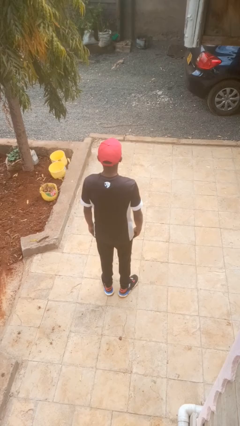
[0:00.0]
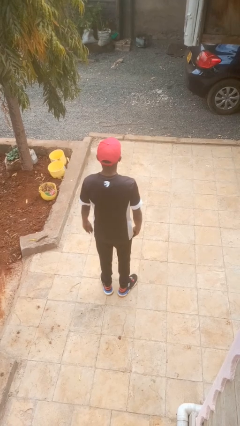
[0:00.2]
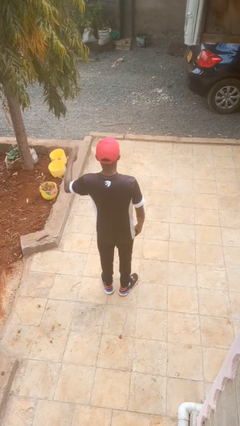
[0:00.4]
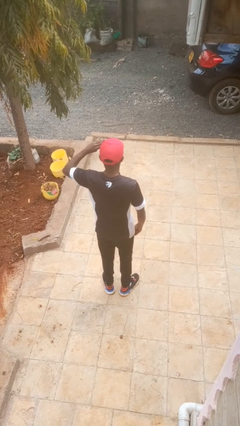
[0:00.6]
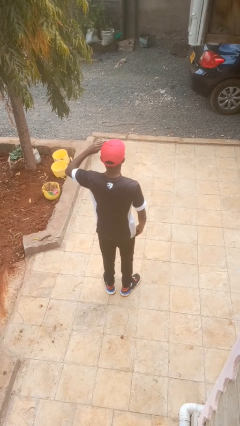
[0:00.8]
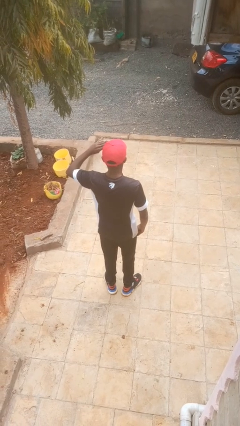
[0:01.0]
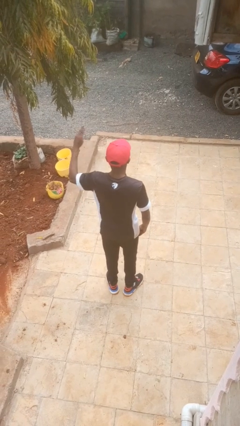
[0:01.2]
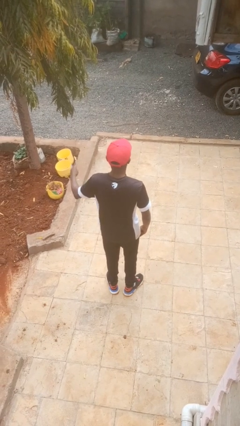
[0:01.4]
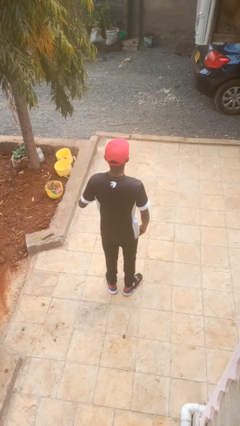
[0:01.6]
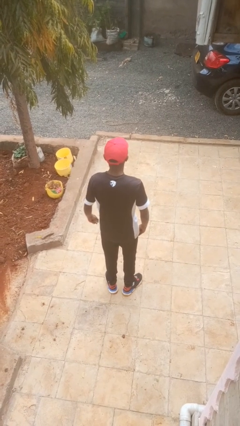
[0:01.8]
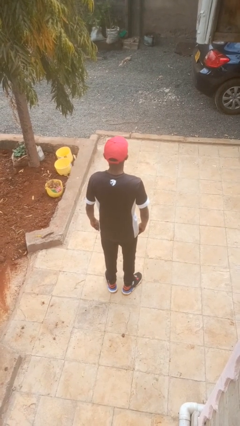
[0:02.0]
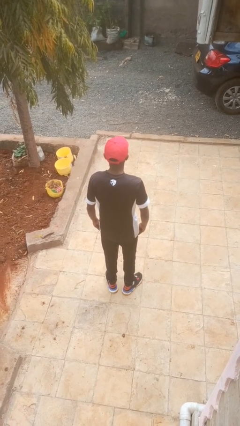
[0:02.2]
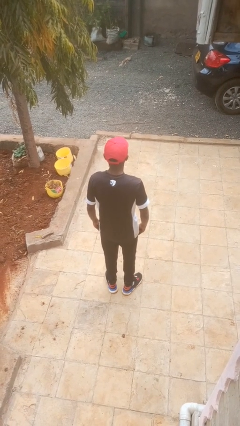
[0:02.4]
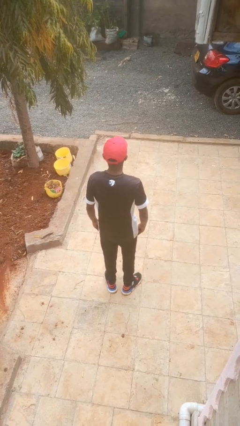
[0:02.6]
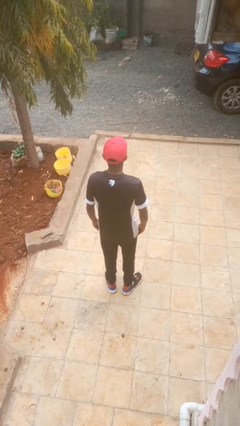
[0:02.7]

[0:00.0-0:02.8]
person salutes

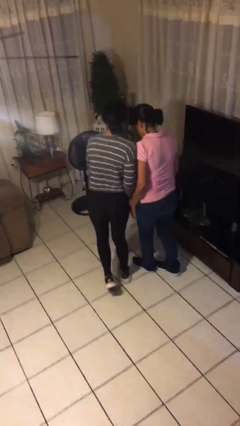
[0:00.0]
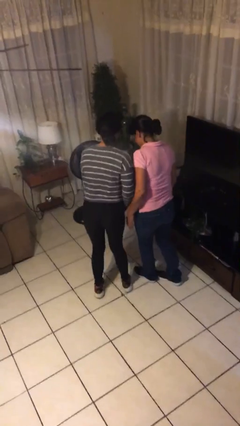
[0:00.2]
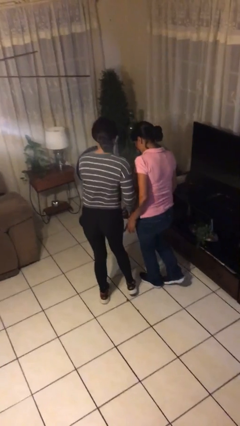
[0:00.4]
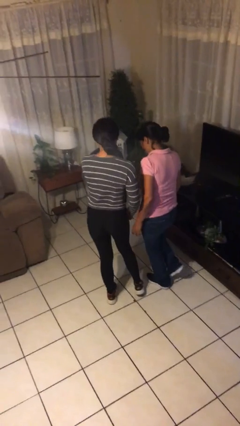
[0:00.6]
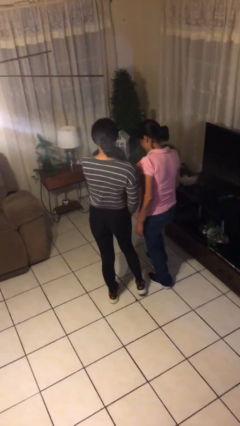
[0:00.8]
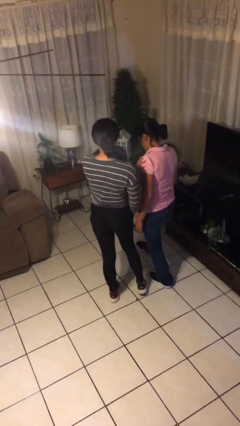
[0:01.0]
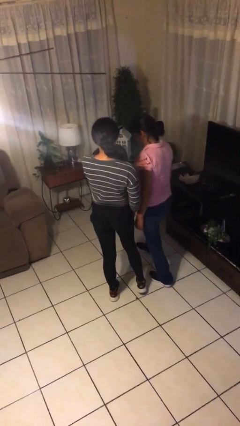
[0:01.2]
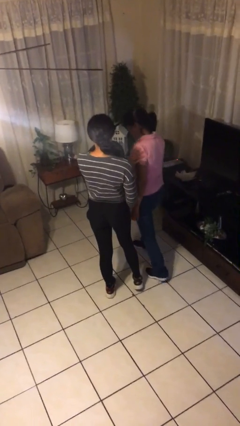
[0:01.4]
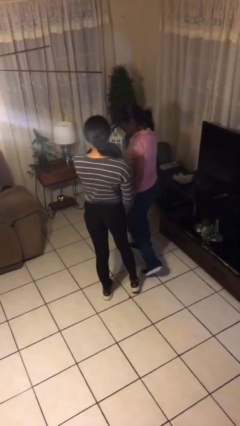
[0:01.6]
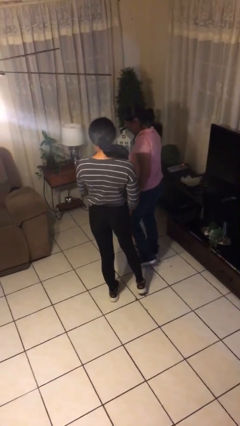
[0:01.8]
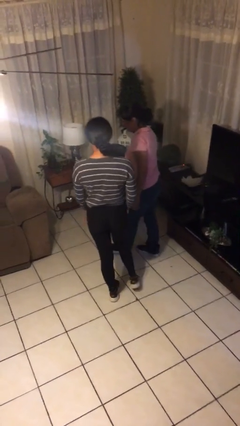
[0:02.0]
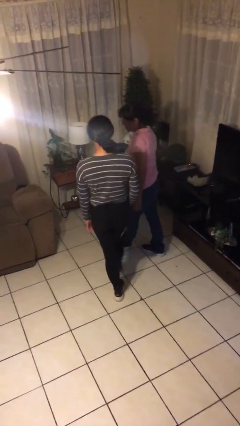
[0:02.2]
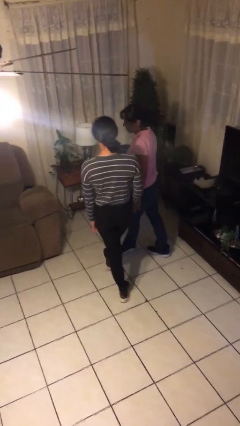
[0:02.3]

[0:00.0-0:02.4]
person bumps into person

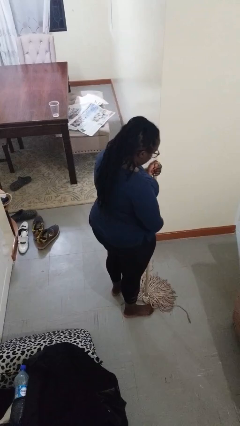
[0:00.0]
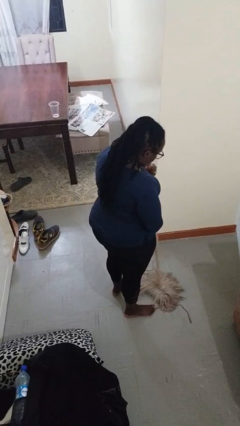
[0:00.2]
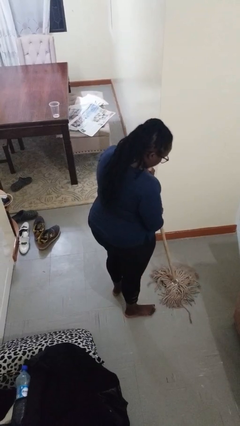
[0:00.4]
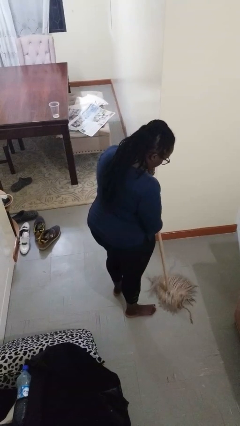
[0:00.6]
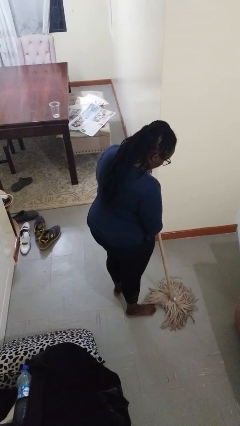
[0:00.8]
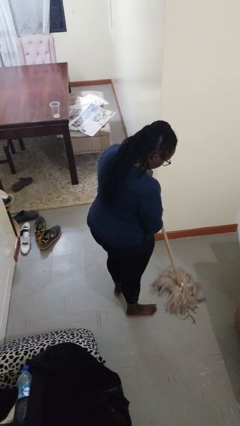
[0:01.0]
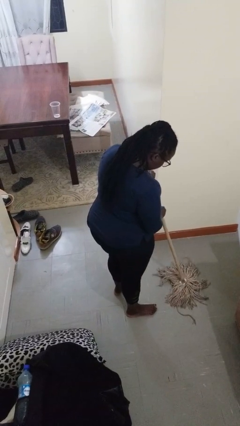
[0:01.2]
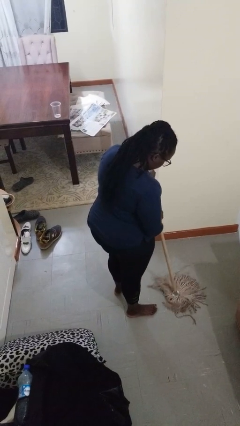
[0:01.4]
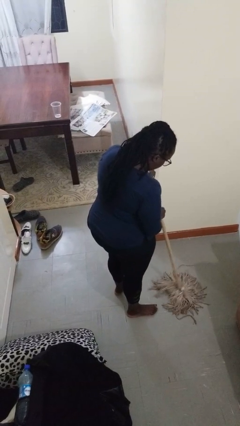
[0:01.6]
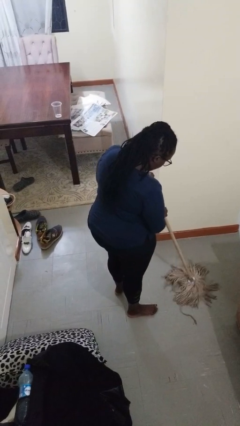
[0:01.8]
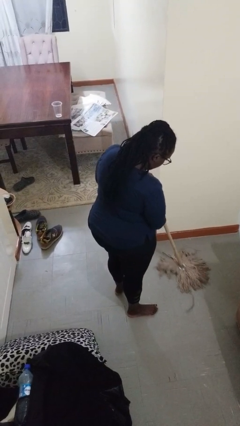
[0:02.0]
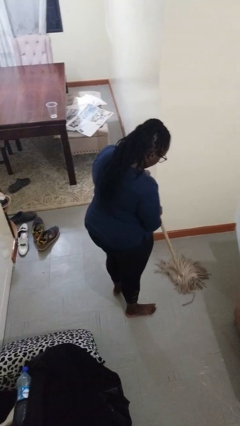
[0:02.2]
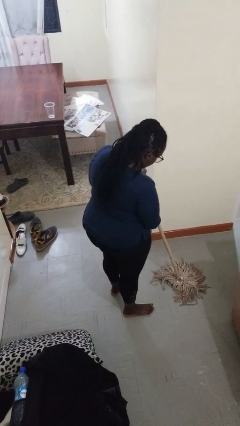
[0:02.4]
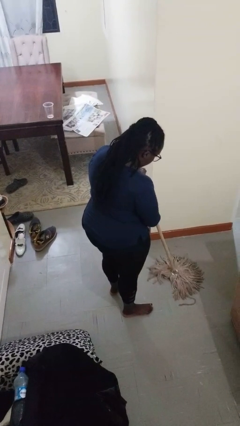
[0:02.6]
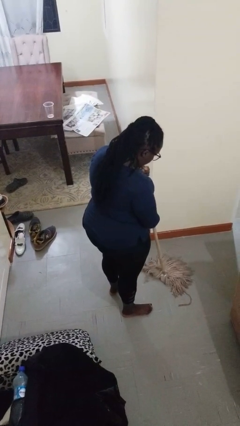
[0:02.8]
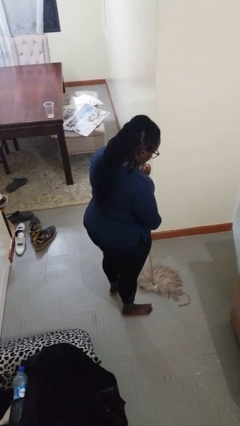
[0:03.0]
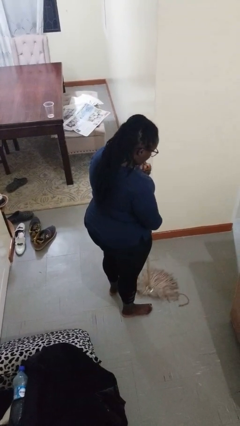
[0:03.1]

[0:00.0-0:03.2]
person mops

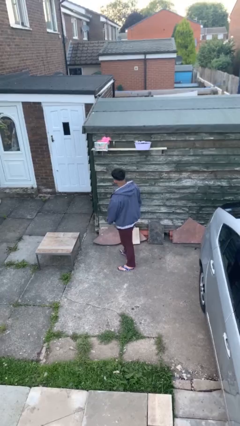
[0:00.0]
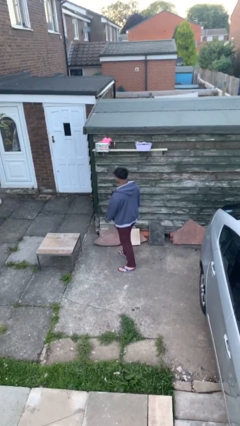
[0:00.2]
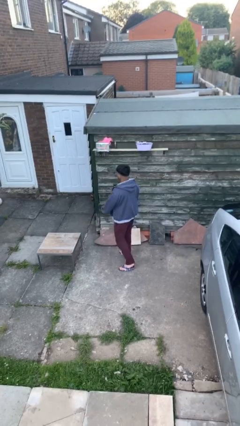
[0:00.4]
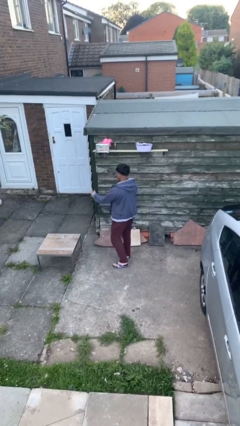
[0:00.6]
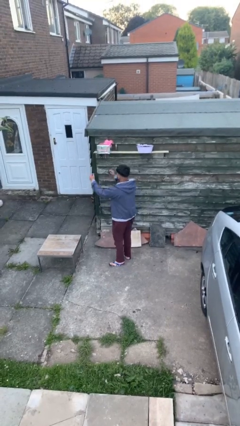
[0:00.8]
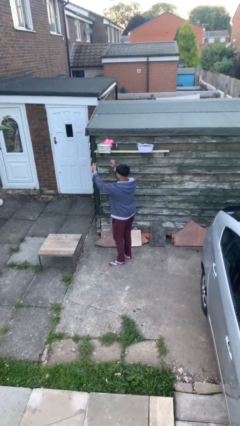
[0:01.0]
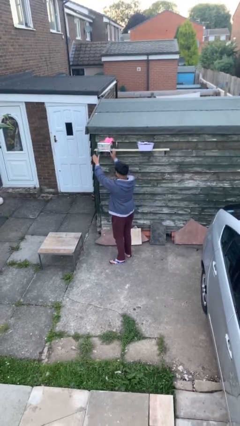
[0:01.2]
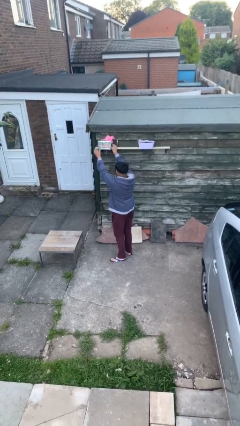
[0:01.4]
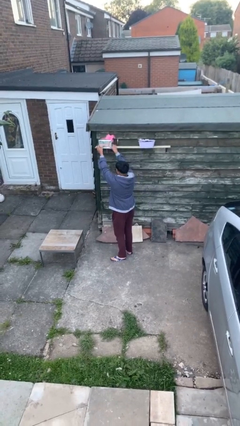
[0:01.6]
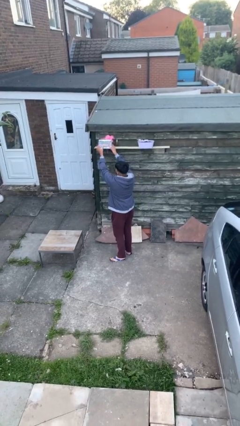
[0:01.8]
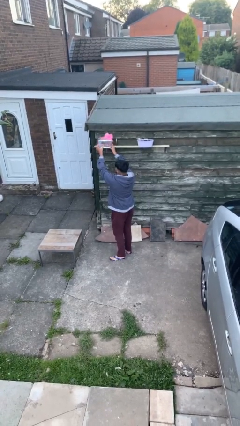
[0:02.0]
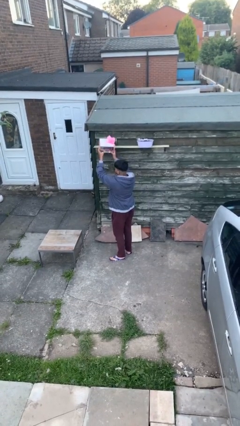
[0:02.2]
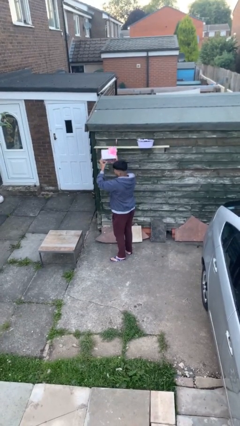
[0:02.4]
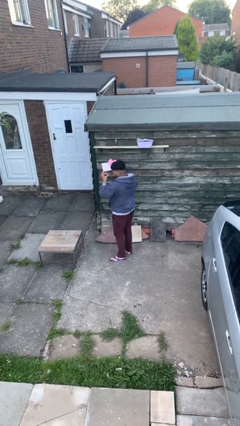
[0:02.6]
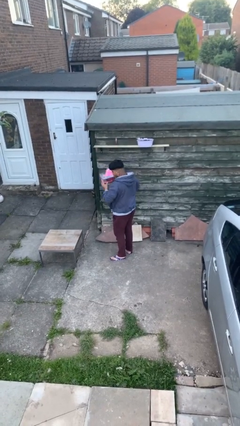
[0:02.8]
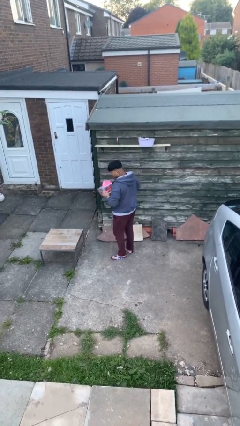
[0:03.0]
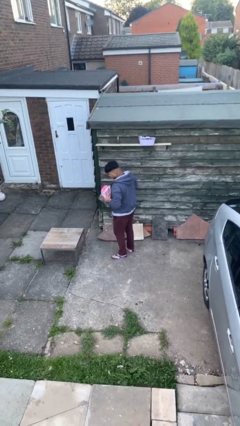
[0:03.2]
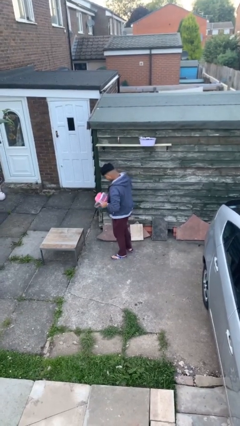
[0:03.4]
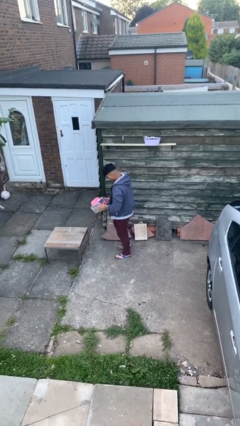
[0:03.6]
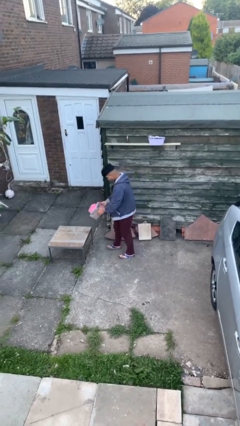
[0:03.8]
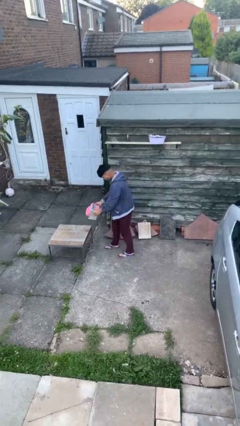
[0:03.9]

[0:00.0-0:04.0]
person picks up object from shelf

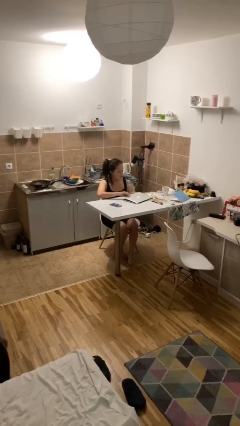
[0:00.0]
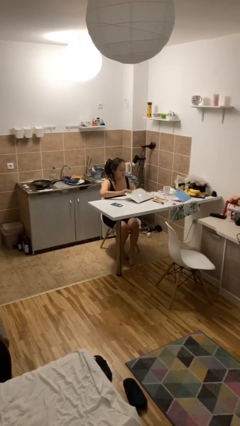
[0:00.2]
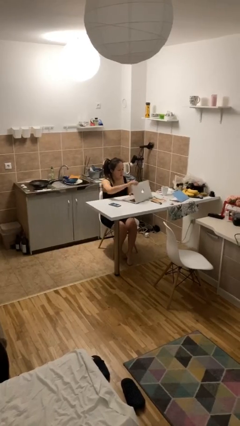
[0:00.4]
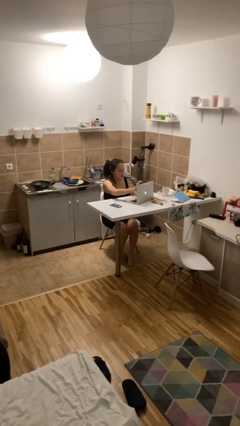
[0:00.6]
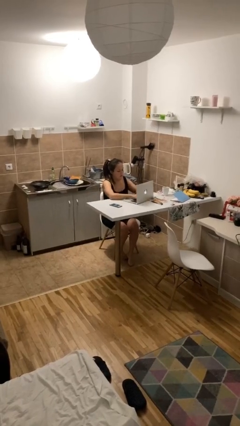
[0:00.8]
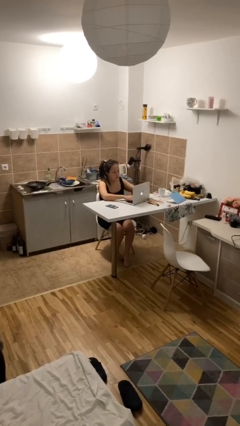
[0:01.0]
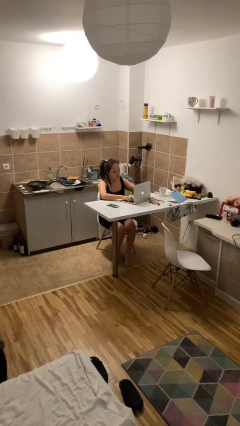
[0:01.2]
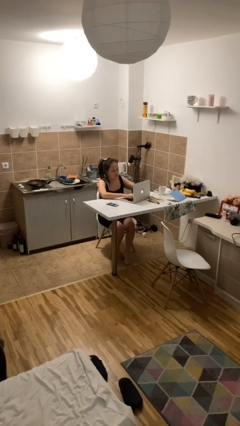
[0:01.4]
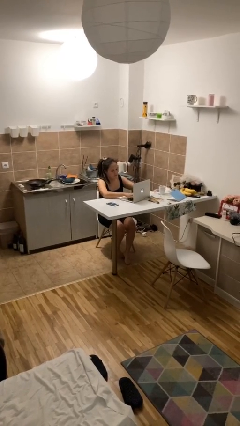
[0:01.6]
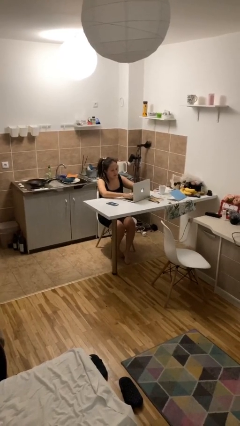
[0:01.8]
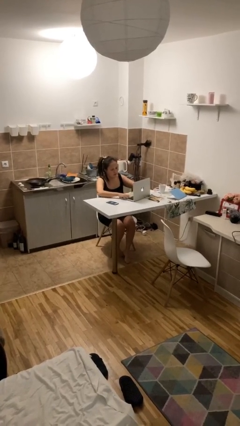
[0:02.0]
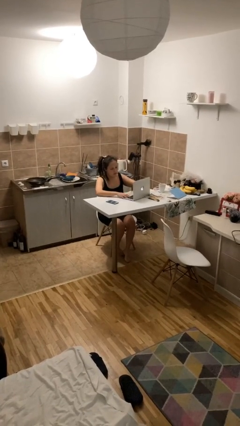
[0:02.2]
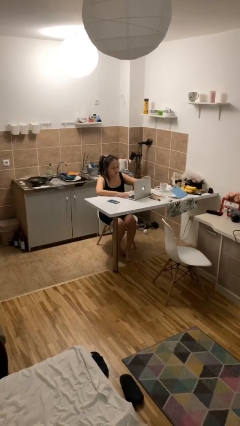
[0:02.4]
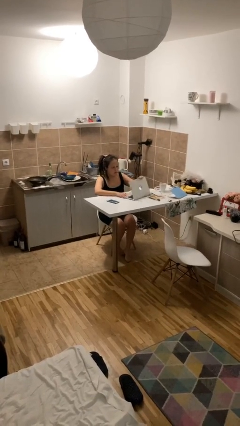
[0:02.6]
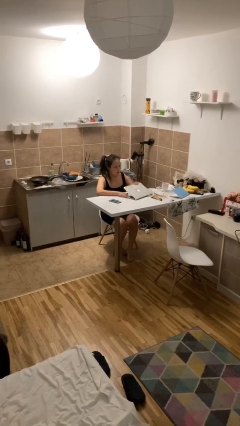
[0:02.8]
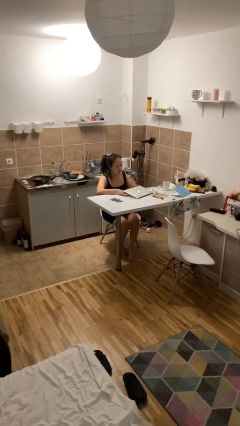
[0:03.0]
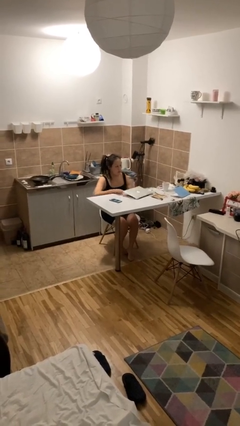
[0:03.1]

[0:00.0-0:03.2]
person interacts with laptop

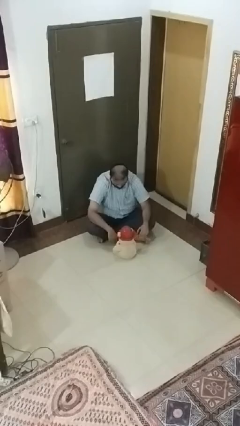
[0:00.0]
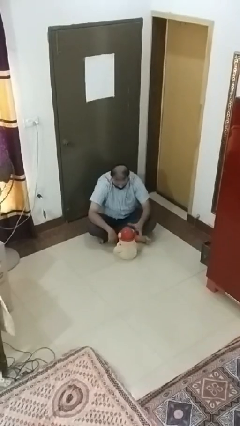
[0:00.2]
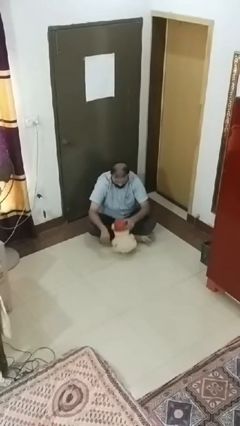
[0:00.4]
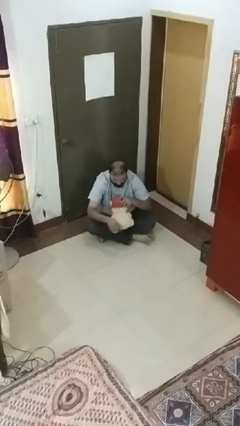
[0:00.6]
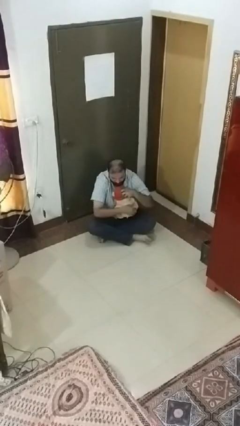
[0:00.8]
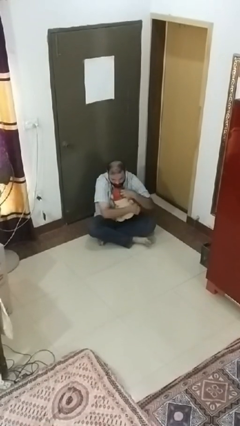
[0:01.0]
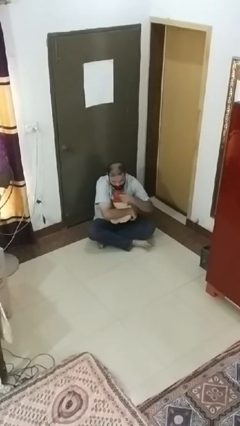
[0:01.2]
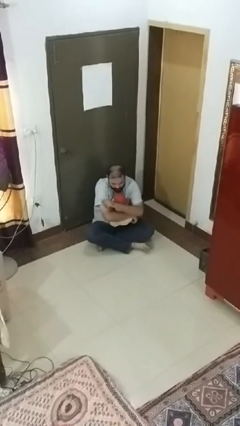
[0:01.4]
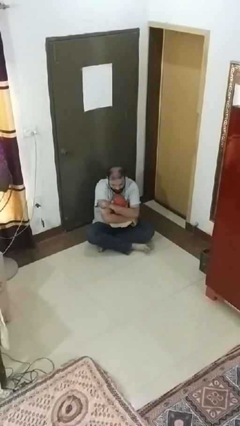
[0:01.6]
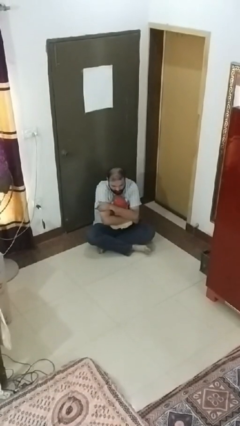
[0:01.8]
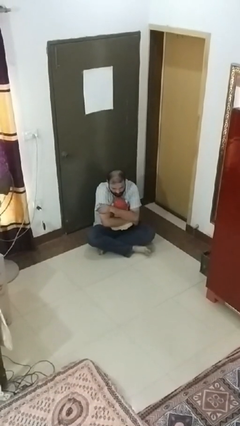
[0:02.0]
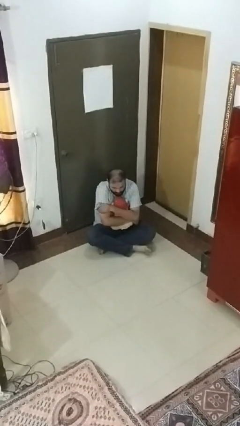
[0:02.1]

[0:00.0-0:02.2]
person hugs stuffed animal
